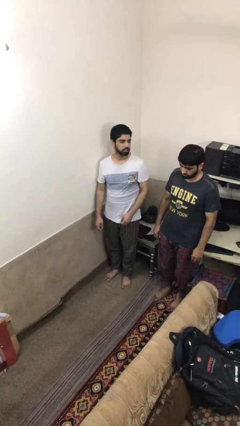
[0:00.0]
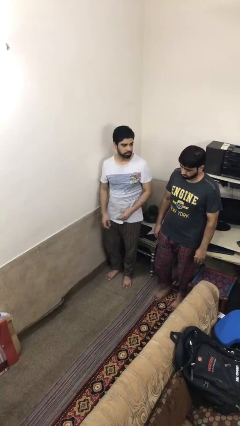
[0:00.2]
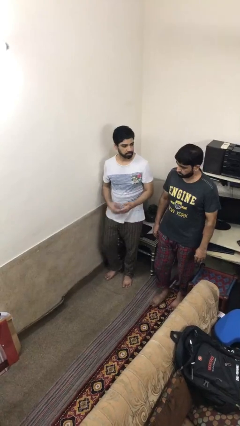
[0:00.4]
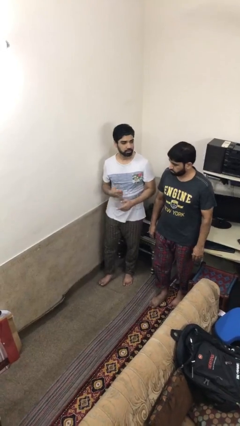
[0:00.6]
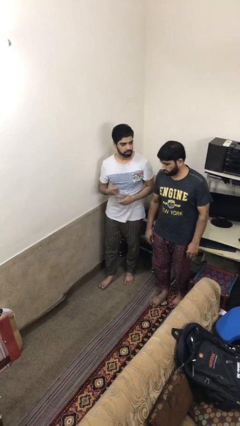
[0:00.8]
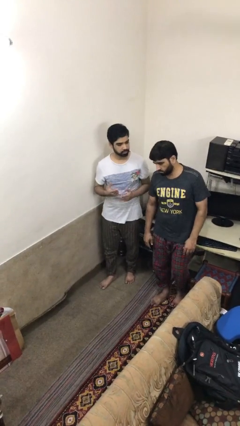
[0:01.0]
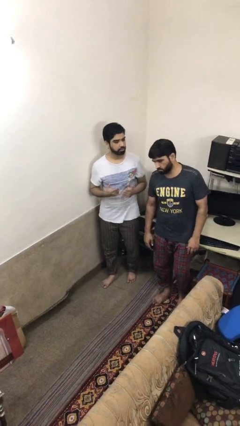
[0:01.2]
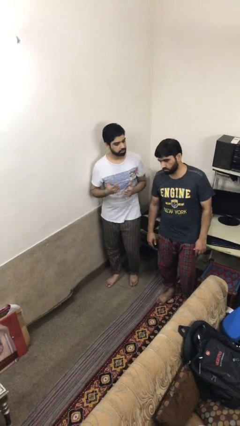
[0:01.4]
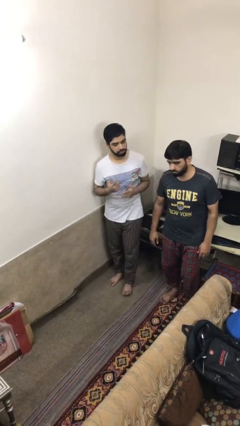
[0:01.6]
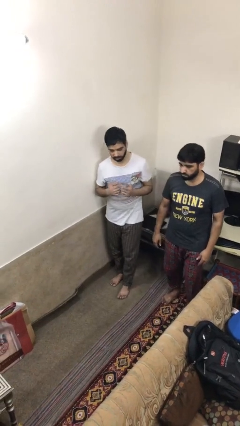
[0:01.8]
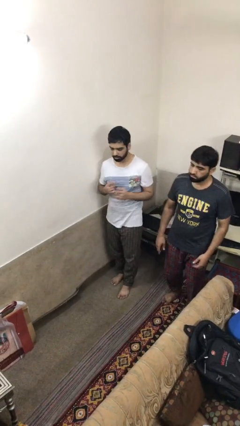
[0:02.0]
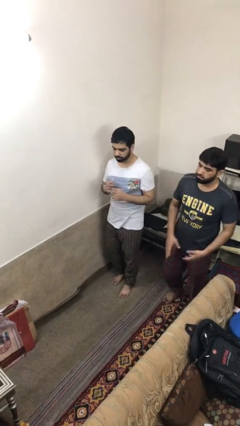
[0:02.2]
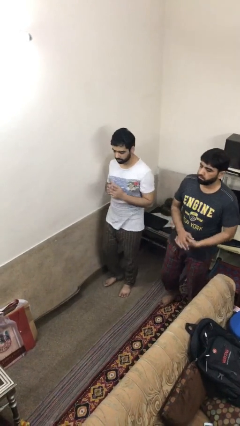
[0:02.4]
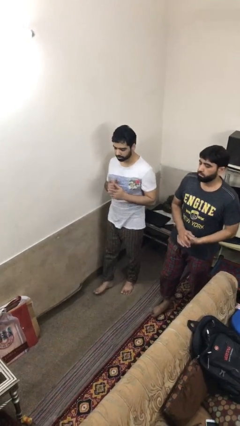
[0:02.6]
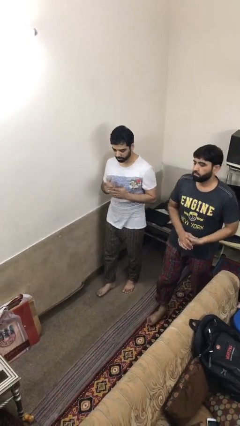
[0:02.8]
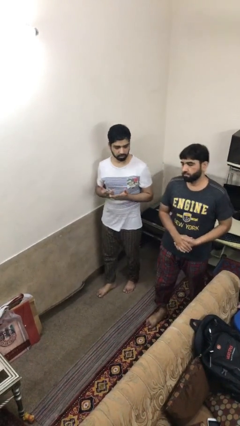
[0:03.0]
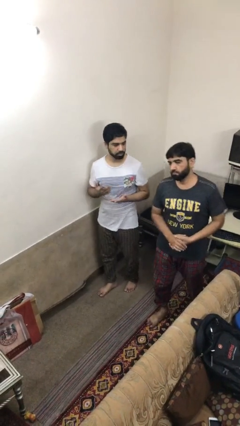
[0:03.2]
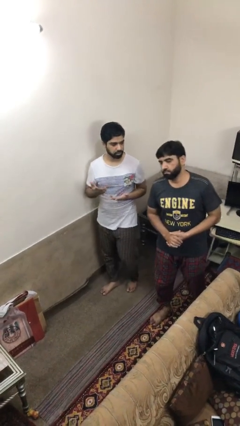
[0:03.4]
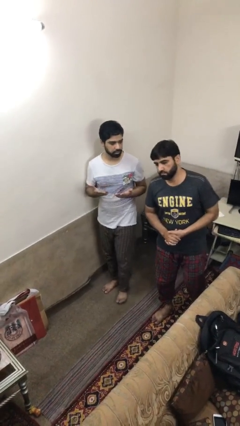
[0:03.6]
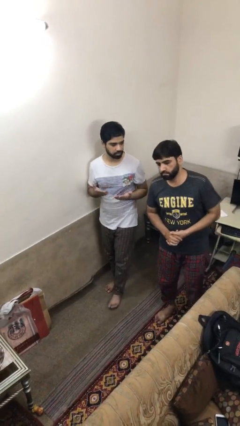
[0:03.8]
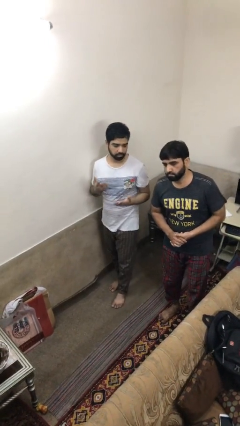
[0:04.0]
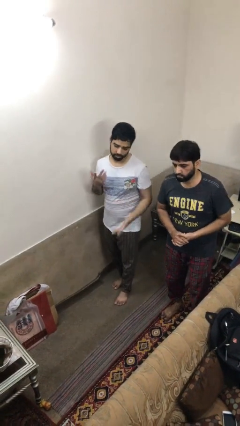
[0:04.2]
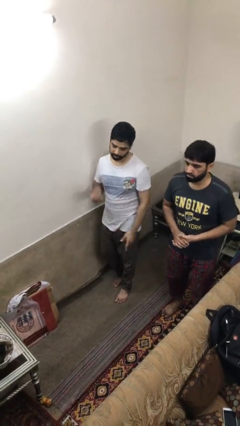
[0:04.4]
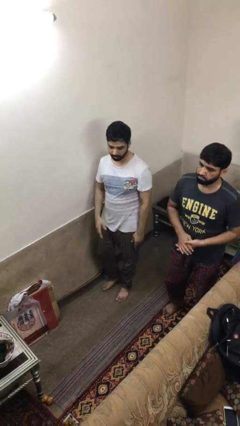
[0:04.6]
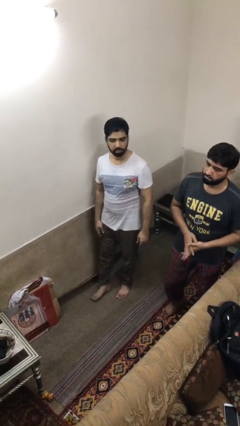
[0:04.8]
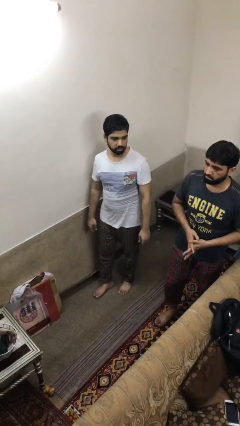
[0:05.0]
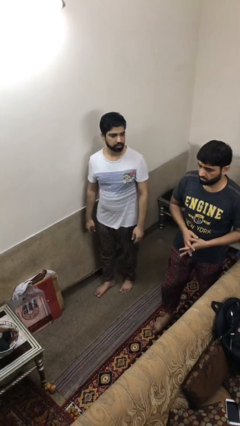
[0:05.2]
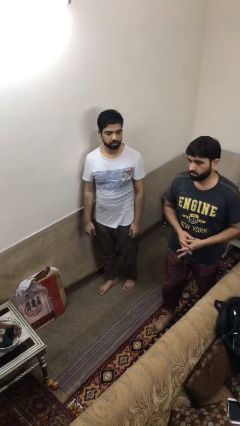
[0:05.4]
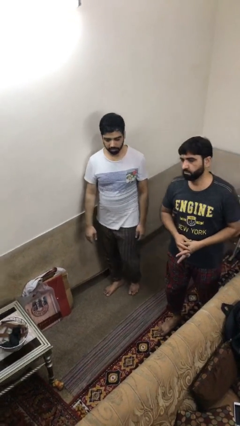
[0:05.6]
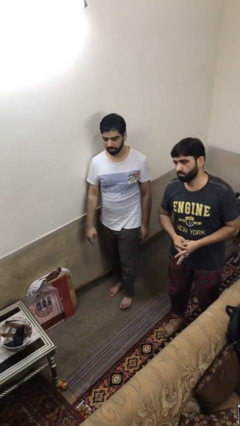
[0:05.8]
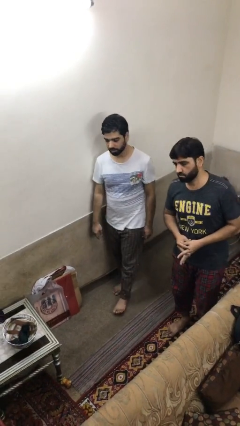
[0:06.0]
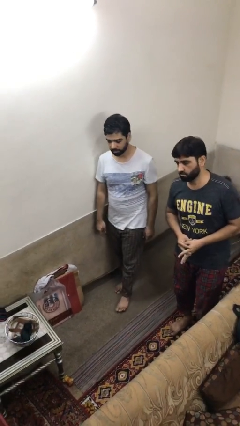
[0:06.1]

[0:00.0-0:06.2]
person talks to person

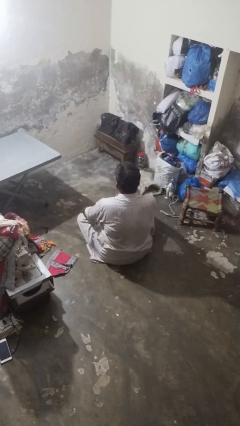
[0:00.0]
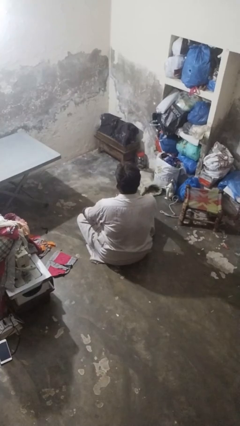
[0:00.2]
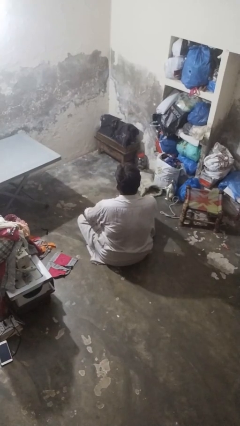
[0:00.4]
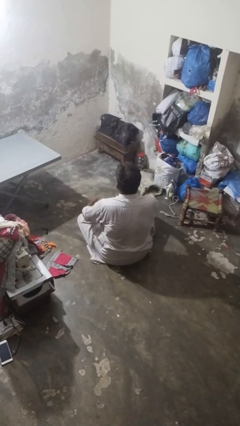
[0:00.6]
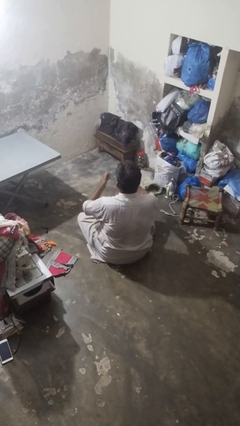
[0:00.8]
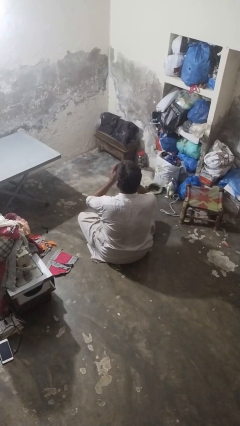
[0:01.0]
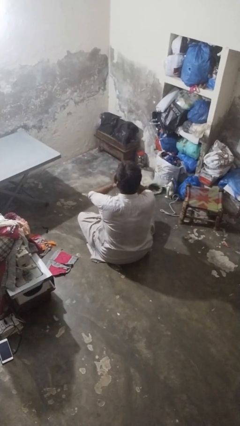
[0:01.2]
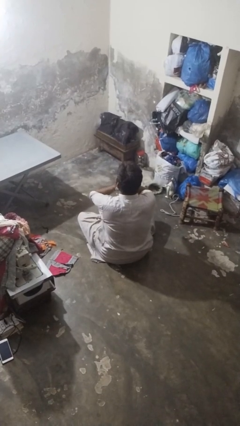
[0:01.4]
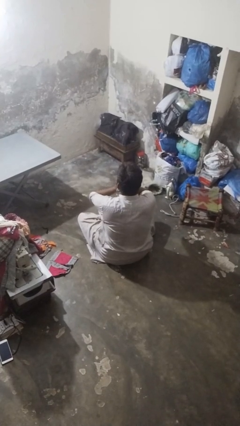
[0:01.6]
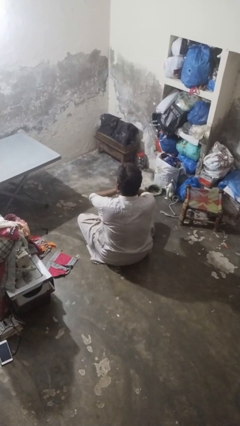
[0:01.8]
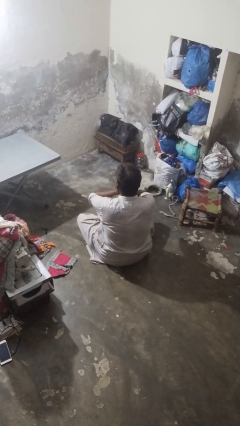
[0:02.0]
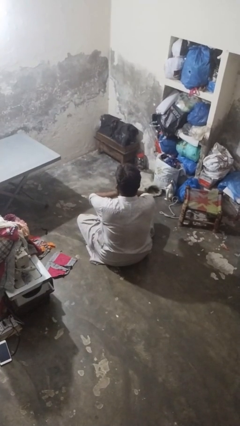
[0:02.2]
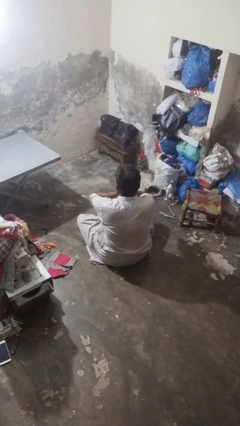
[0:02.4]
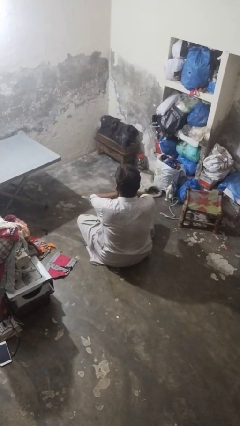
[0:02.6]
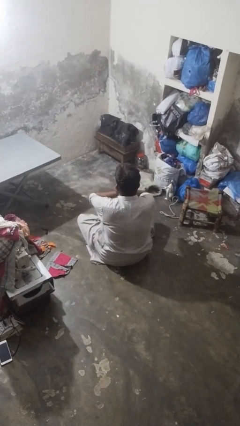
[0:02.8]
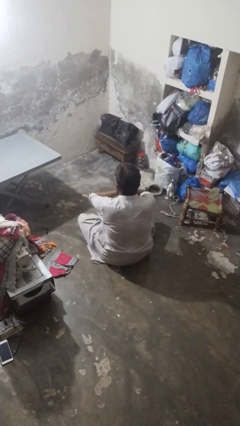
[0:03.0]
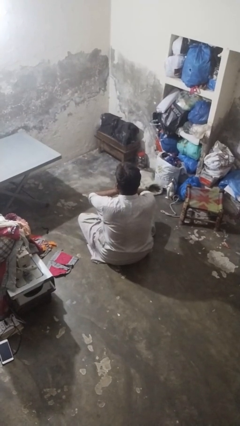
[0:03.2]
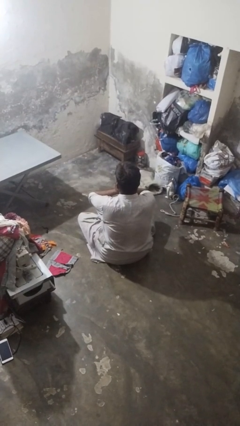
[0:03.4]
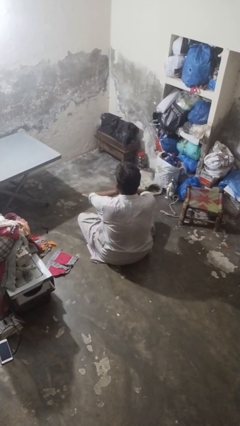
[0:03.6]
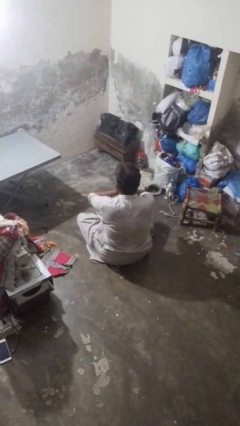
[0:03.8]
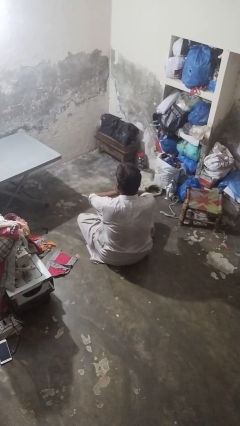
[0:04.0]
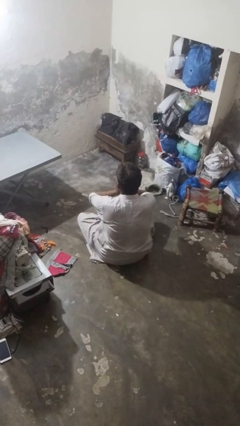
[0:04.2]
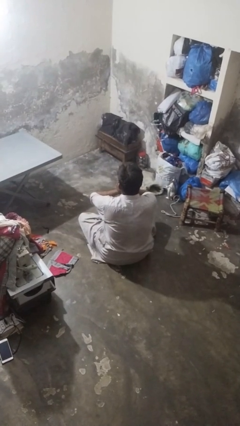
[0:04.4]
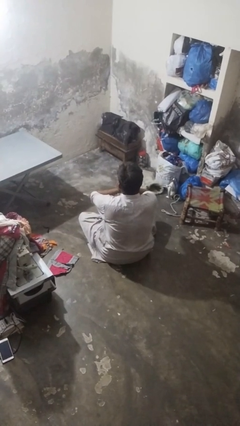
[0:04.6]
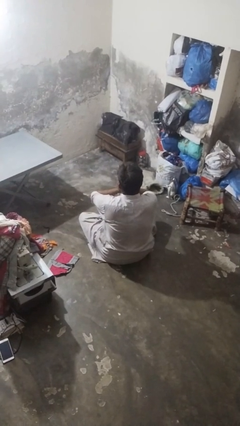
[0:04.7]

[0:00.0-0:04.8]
person covers face with hands

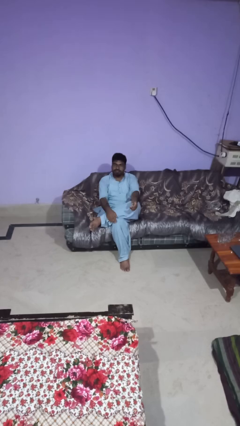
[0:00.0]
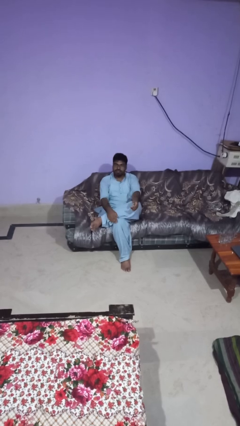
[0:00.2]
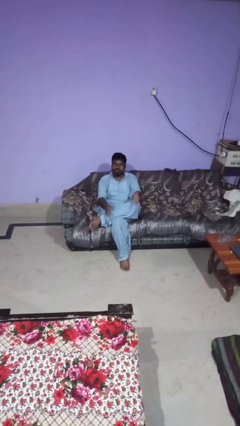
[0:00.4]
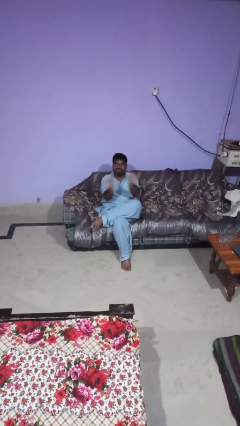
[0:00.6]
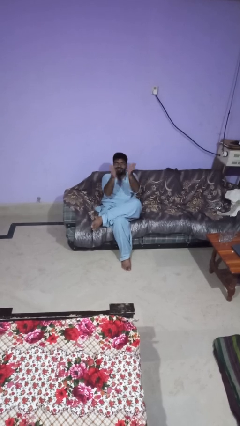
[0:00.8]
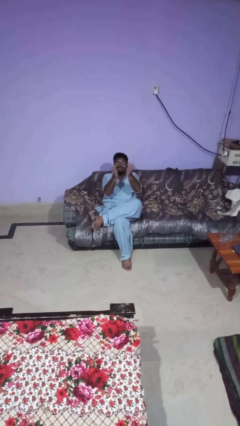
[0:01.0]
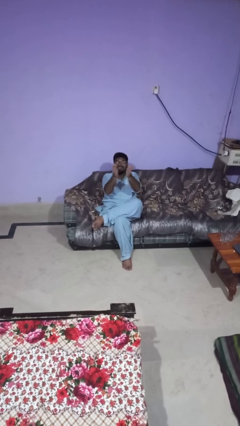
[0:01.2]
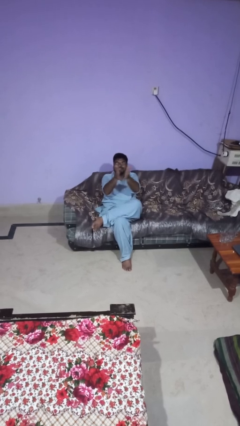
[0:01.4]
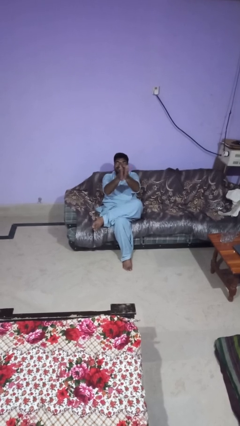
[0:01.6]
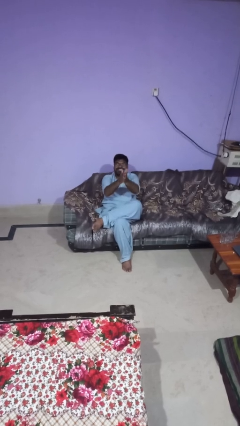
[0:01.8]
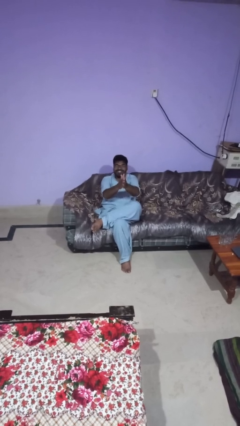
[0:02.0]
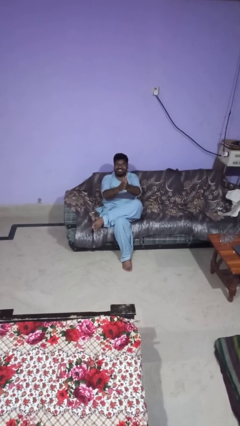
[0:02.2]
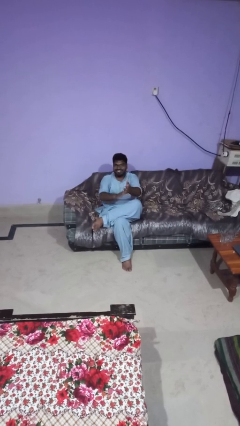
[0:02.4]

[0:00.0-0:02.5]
person claps hands

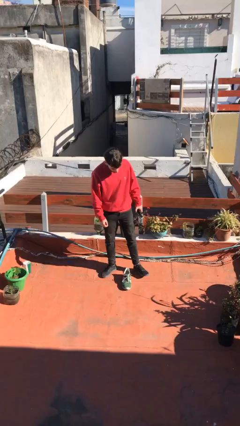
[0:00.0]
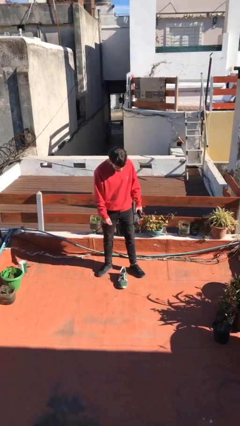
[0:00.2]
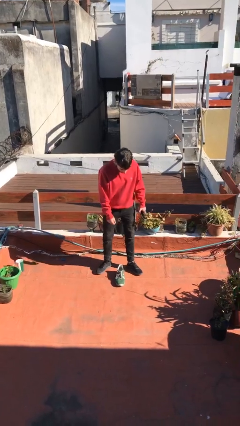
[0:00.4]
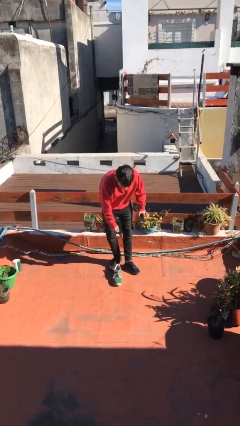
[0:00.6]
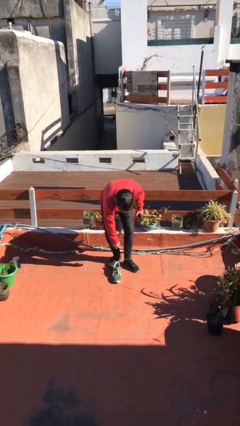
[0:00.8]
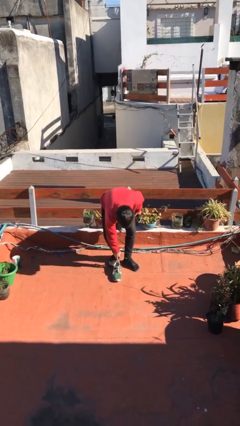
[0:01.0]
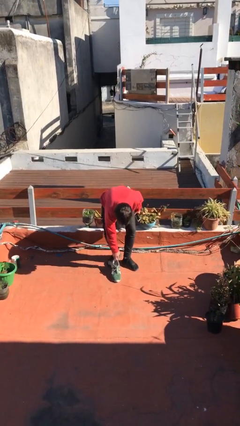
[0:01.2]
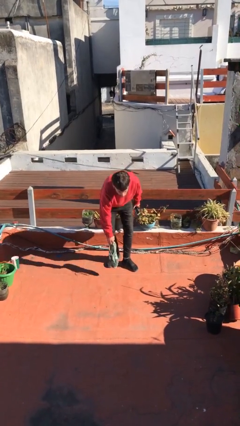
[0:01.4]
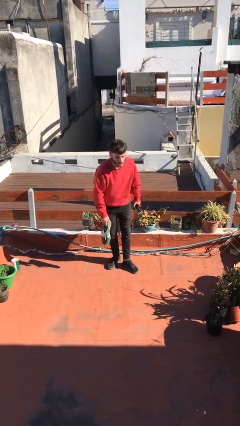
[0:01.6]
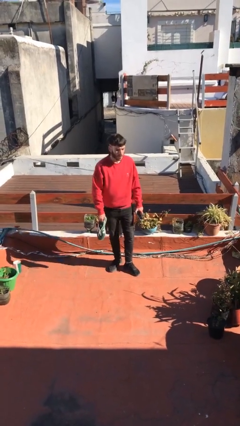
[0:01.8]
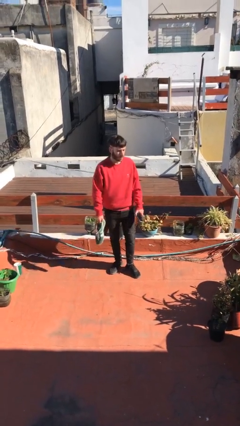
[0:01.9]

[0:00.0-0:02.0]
person picks up object from floor

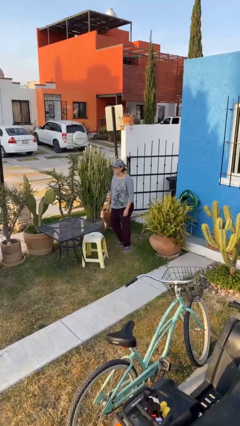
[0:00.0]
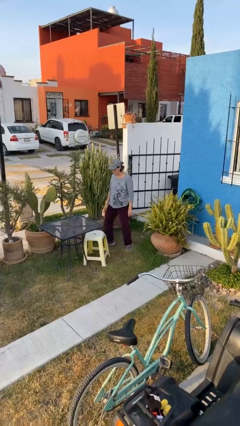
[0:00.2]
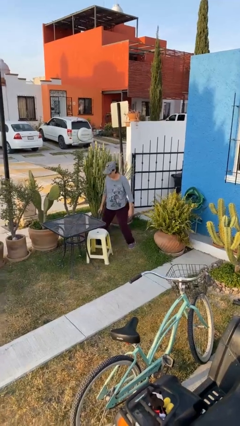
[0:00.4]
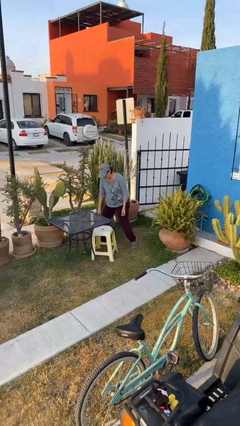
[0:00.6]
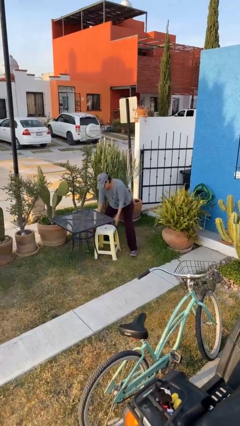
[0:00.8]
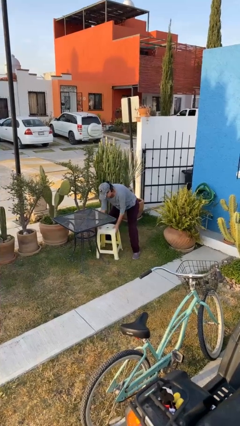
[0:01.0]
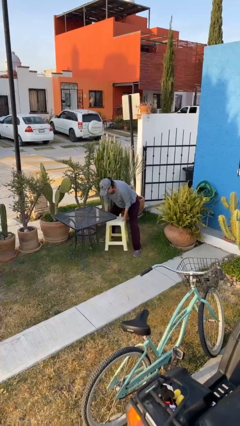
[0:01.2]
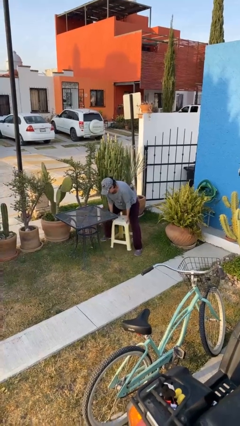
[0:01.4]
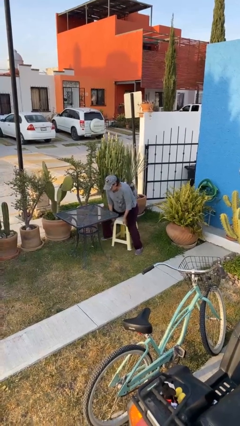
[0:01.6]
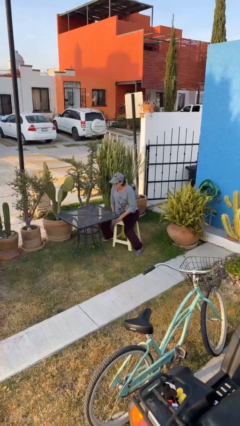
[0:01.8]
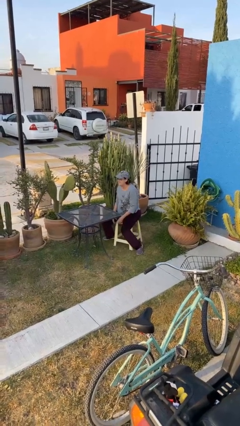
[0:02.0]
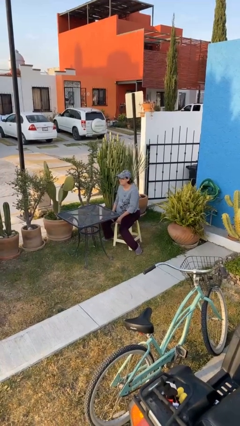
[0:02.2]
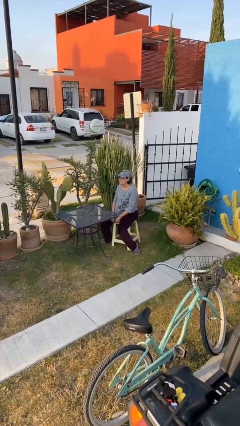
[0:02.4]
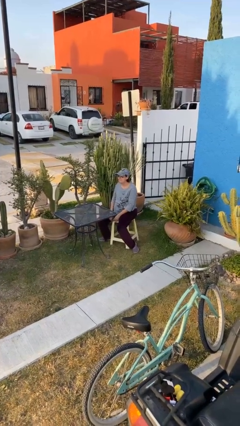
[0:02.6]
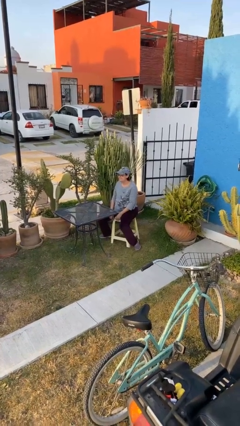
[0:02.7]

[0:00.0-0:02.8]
person sits down
